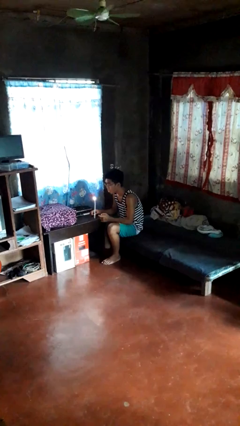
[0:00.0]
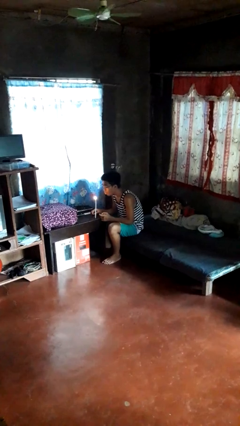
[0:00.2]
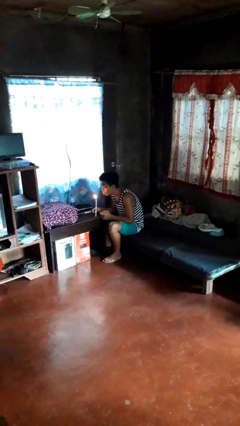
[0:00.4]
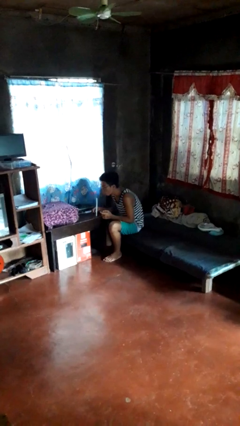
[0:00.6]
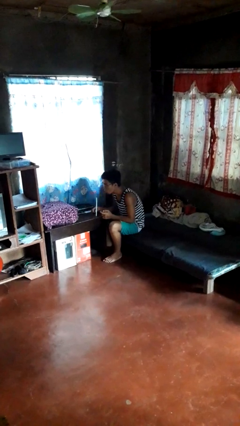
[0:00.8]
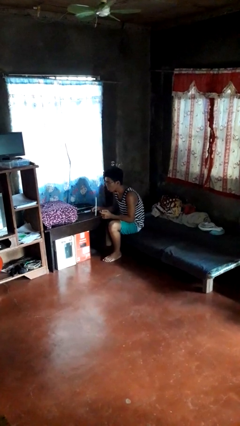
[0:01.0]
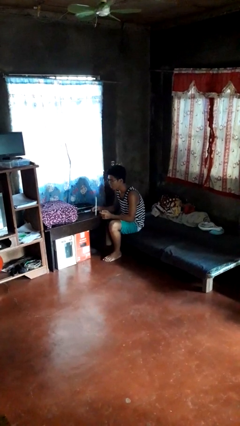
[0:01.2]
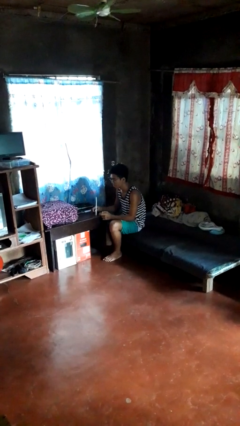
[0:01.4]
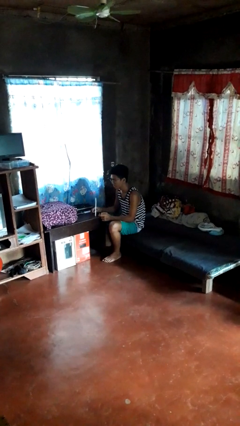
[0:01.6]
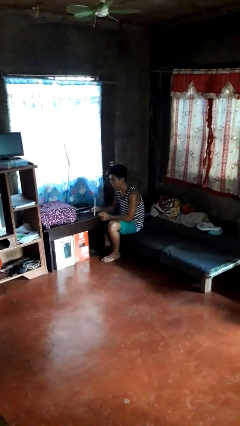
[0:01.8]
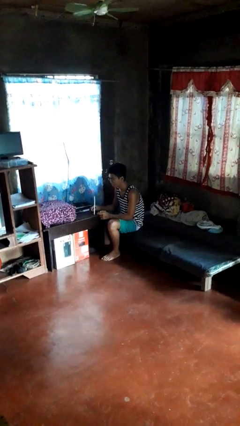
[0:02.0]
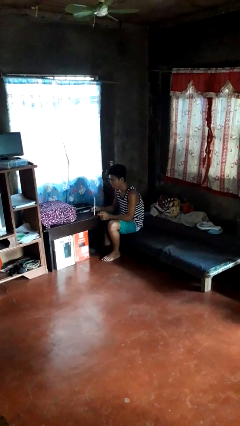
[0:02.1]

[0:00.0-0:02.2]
person extinguishes candle

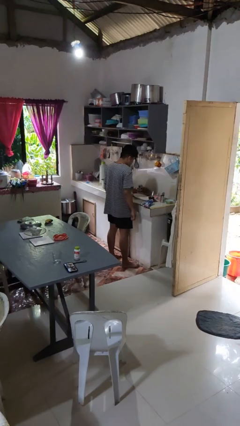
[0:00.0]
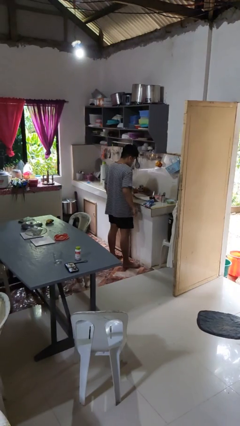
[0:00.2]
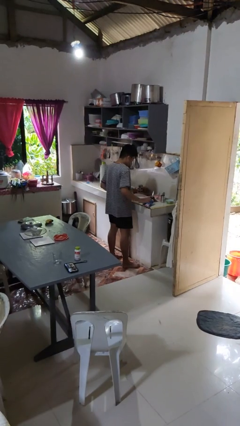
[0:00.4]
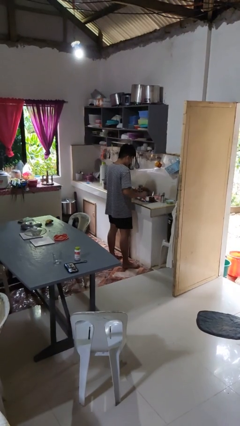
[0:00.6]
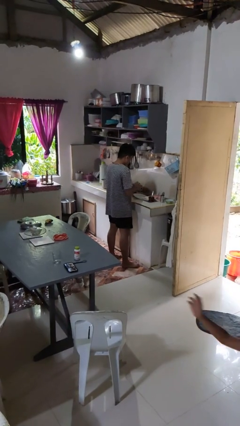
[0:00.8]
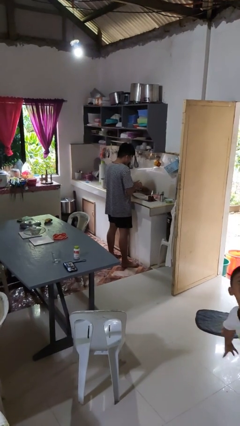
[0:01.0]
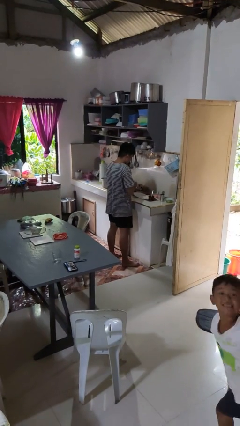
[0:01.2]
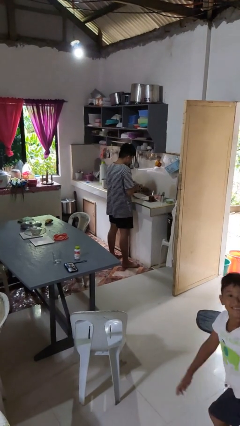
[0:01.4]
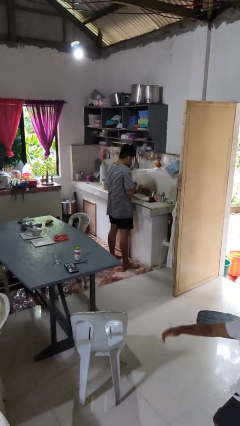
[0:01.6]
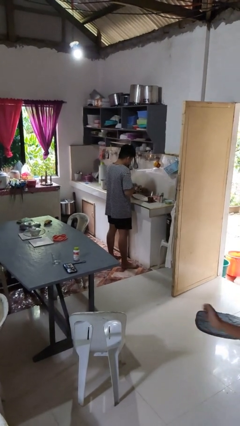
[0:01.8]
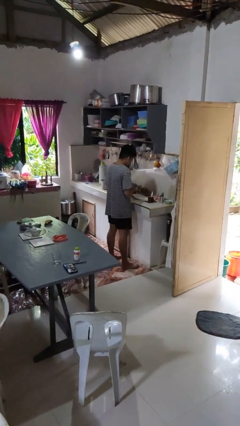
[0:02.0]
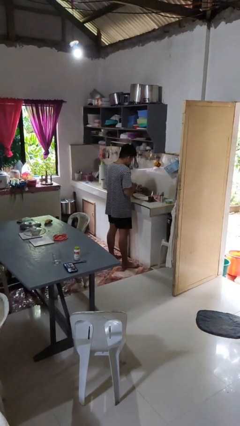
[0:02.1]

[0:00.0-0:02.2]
person dries hands with towel

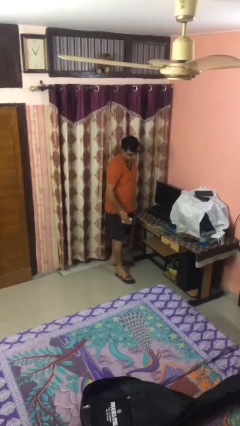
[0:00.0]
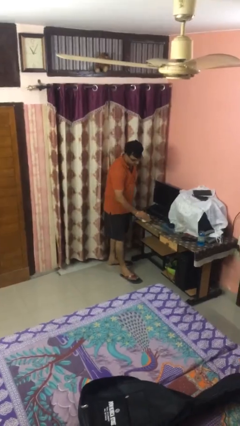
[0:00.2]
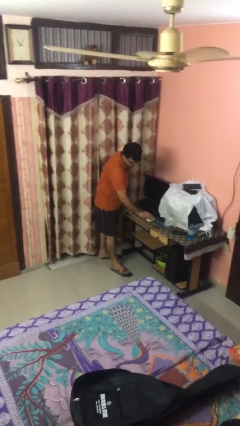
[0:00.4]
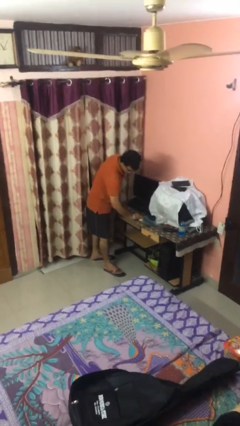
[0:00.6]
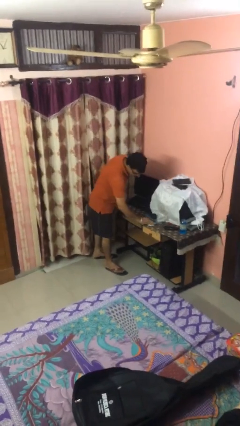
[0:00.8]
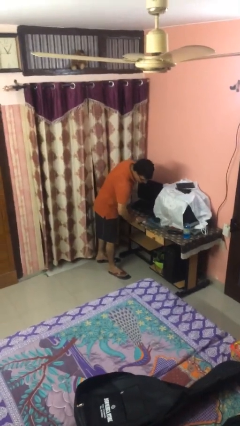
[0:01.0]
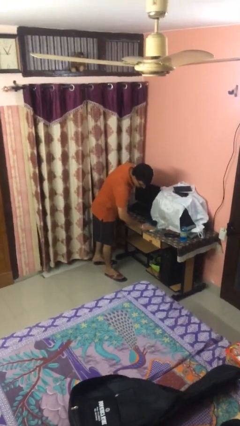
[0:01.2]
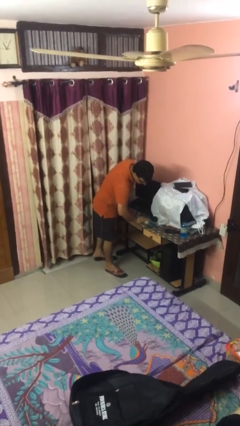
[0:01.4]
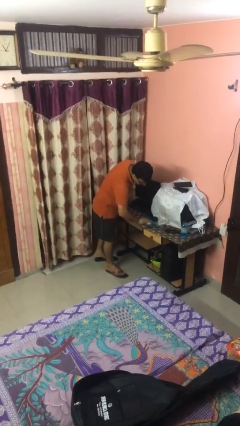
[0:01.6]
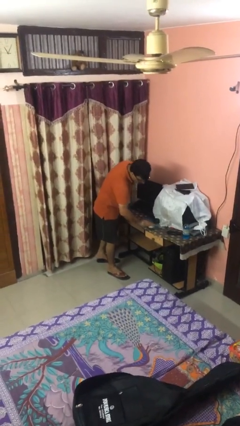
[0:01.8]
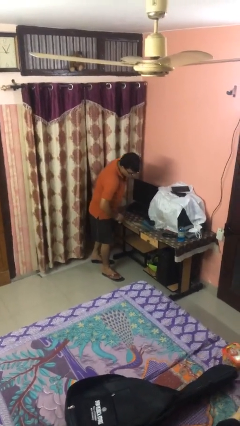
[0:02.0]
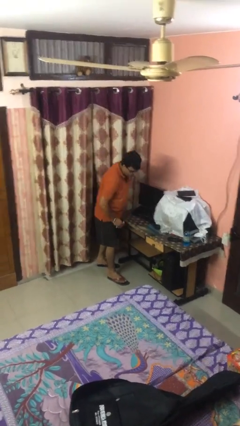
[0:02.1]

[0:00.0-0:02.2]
person cleans table with rag

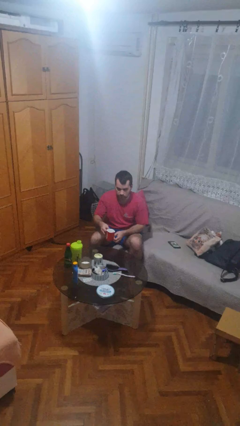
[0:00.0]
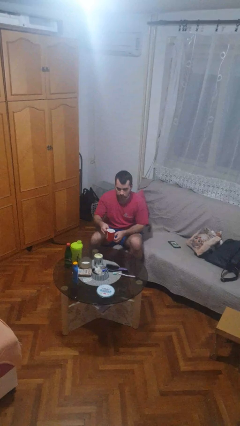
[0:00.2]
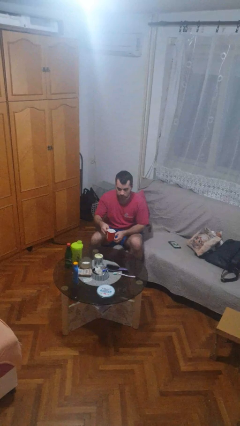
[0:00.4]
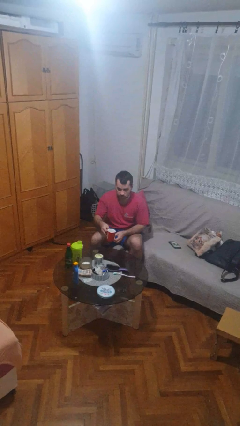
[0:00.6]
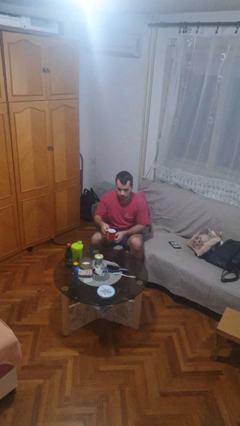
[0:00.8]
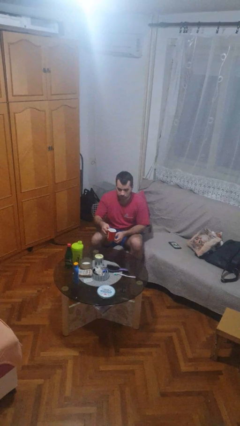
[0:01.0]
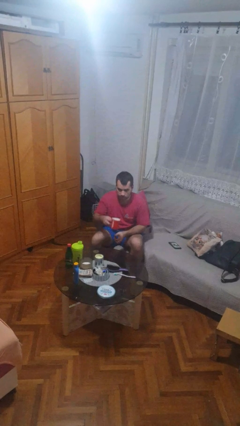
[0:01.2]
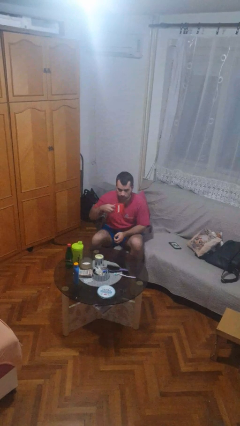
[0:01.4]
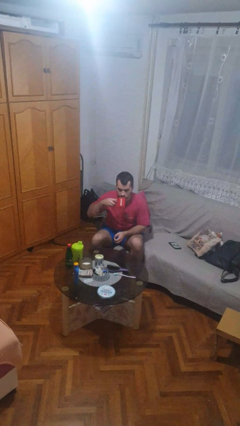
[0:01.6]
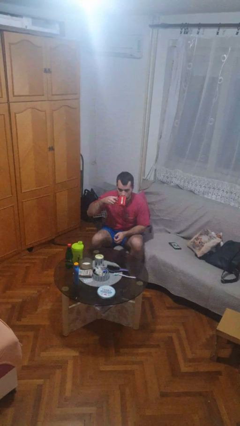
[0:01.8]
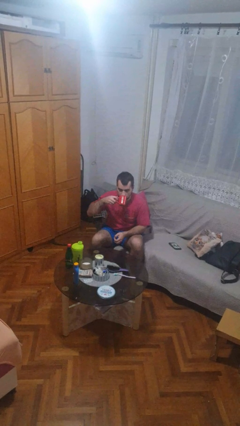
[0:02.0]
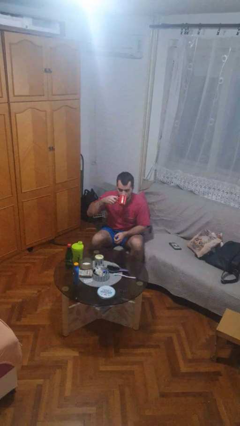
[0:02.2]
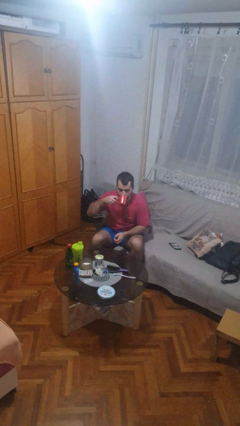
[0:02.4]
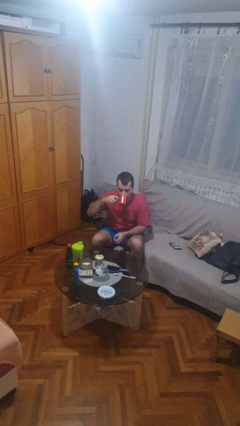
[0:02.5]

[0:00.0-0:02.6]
person drinks from mug

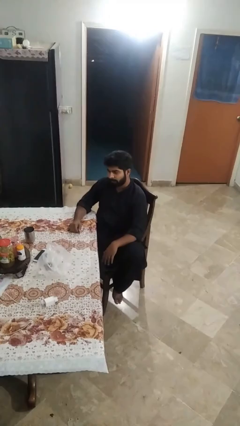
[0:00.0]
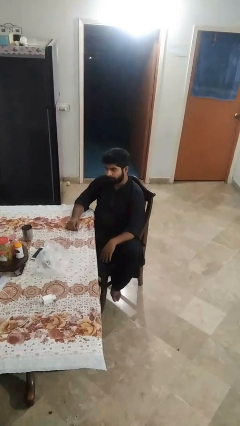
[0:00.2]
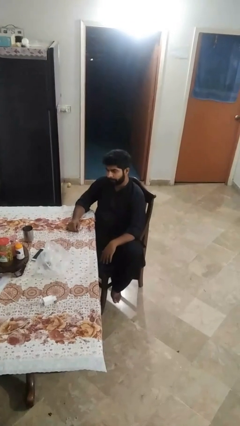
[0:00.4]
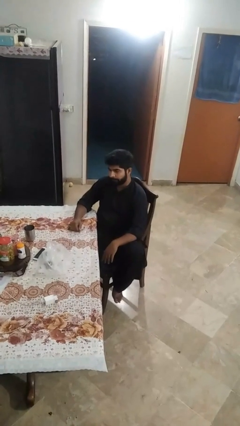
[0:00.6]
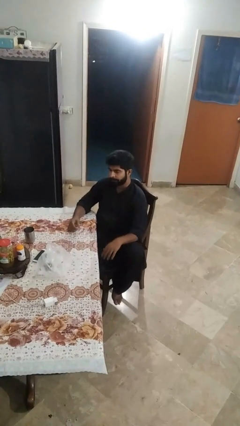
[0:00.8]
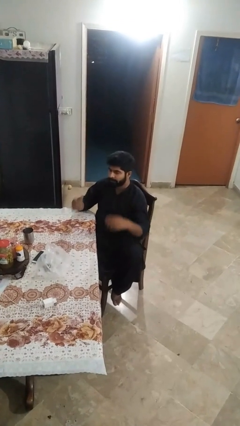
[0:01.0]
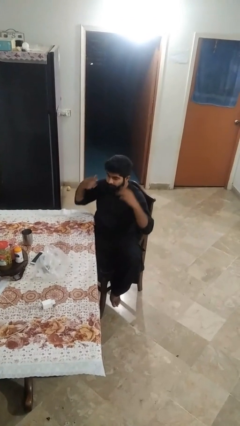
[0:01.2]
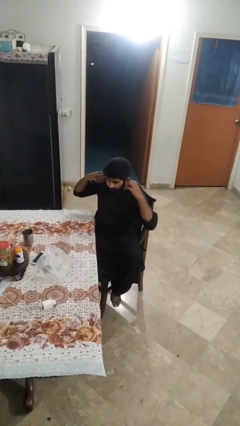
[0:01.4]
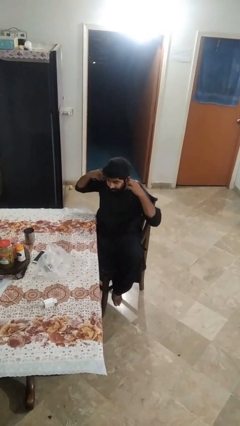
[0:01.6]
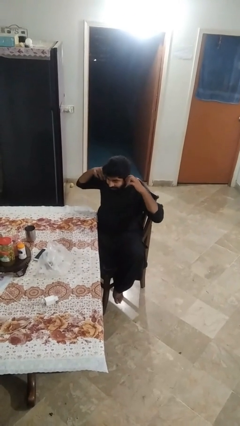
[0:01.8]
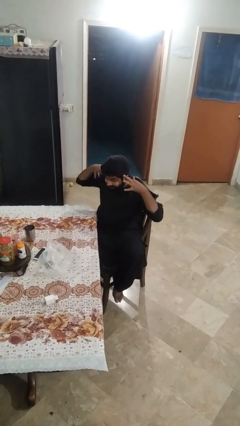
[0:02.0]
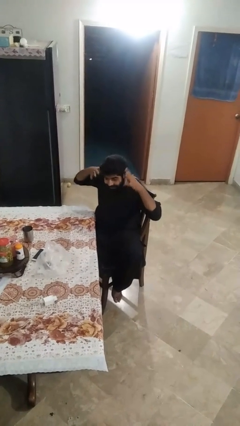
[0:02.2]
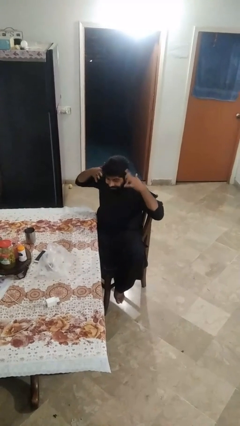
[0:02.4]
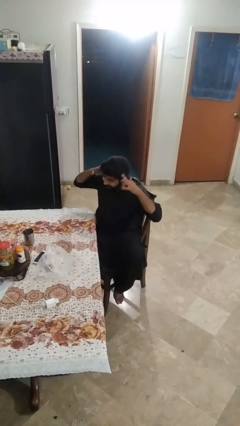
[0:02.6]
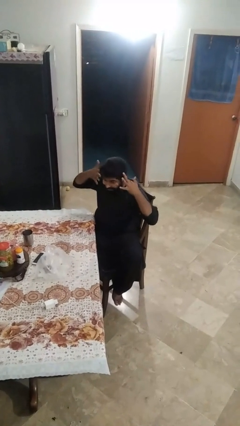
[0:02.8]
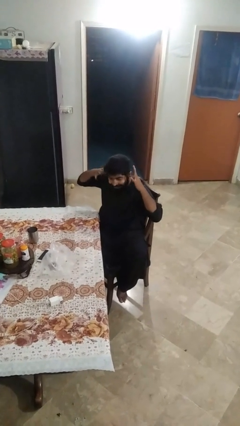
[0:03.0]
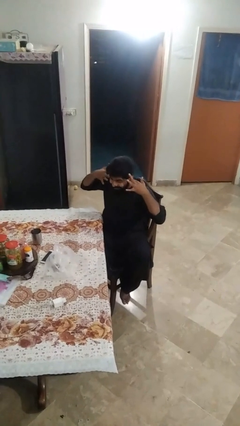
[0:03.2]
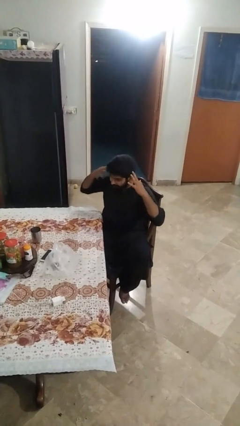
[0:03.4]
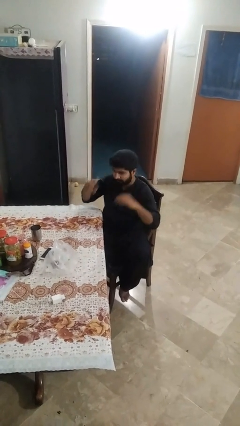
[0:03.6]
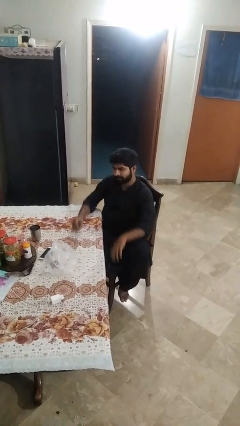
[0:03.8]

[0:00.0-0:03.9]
person puts fingers in ear

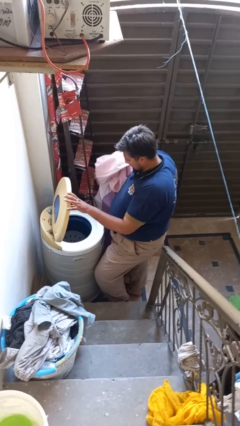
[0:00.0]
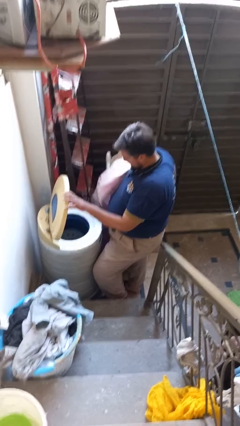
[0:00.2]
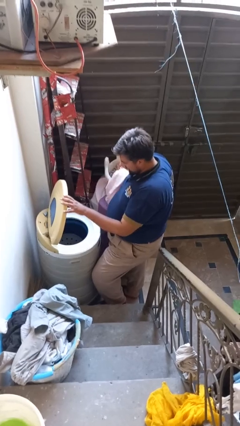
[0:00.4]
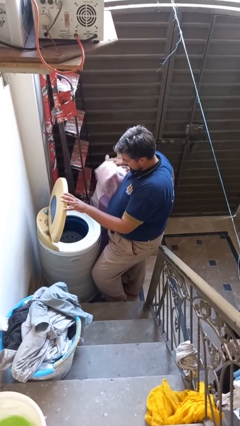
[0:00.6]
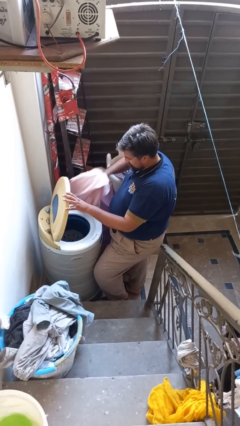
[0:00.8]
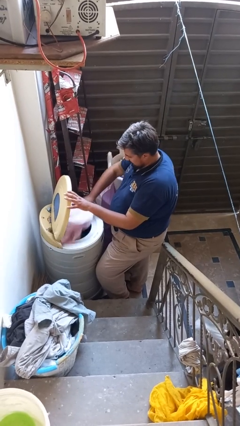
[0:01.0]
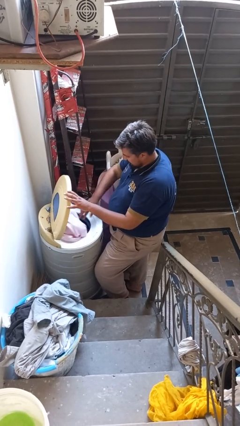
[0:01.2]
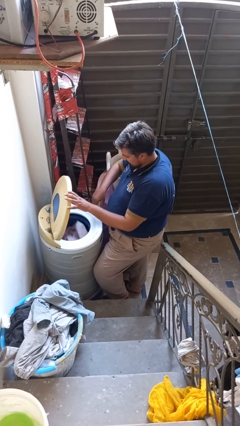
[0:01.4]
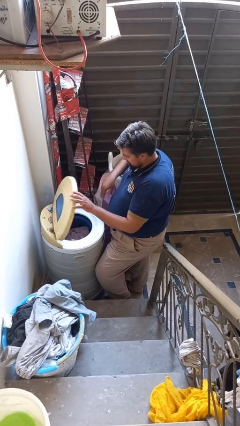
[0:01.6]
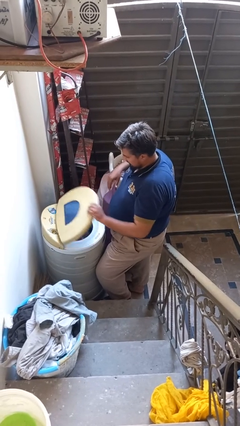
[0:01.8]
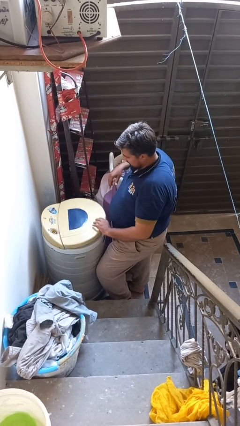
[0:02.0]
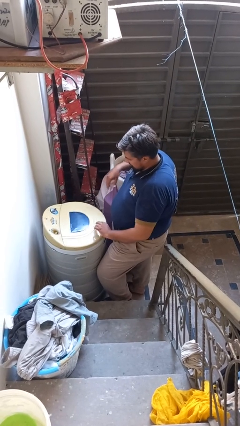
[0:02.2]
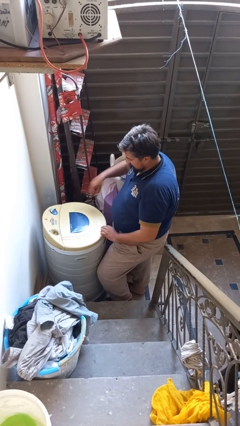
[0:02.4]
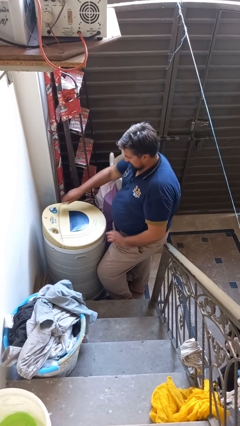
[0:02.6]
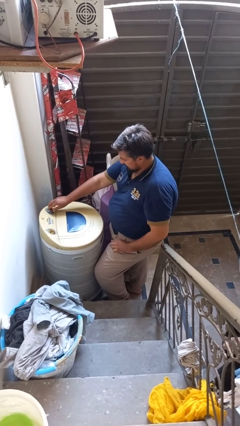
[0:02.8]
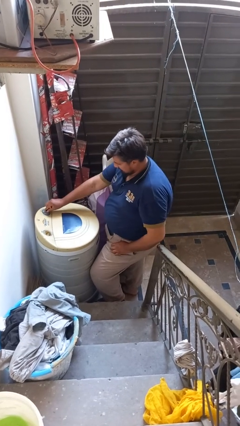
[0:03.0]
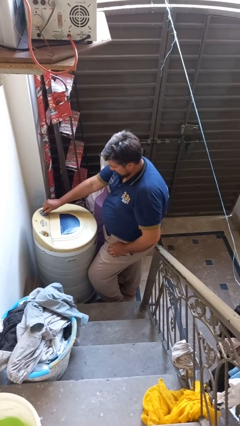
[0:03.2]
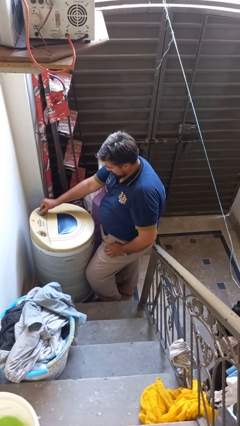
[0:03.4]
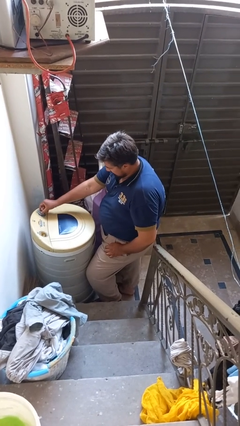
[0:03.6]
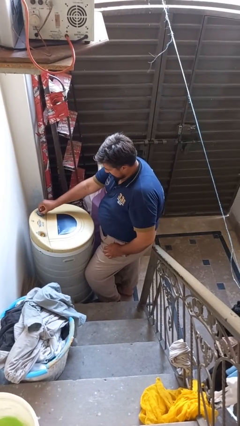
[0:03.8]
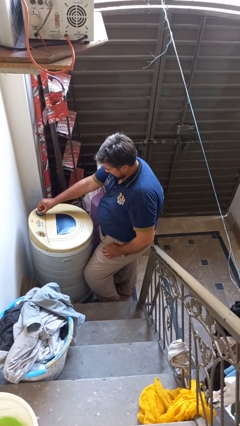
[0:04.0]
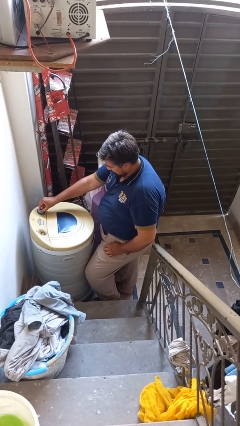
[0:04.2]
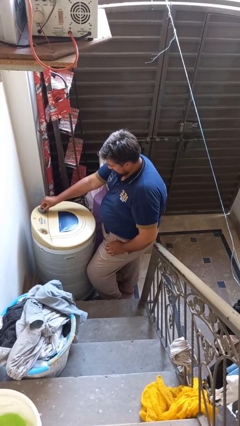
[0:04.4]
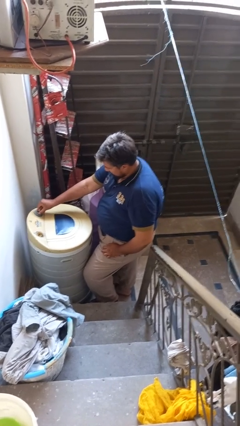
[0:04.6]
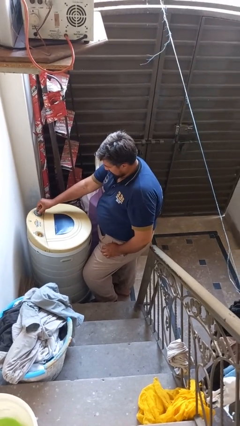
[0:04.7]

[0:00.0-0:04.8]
person loads dryer
